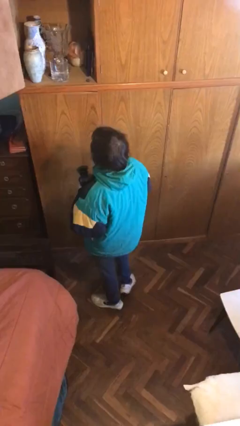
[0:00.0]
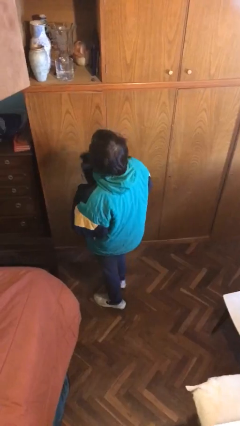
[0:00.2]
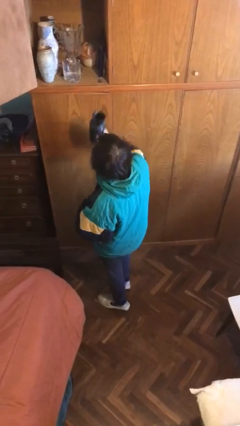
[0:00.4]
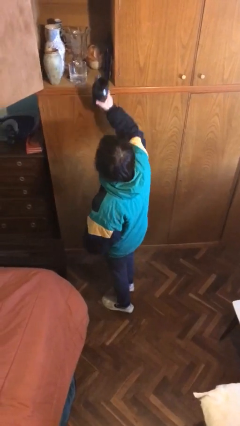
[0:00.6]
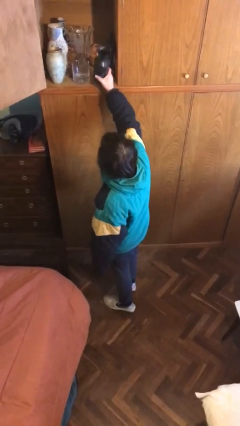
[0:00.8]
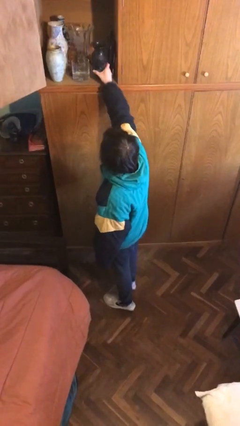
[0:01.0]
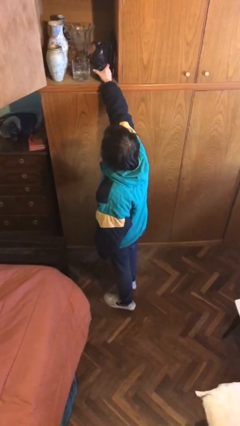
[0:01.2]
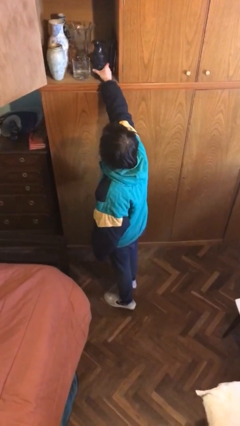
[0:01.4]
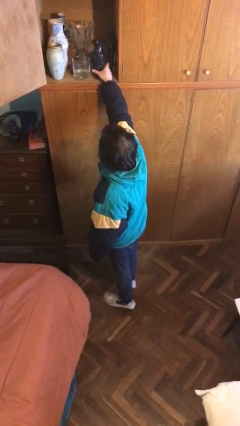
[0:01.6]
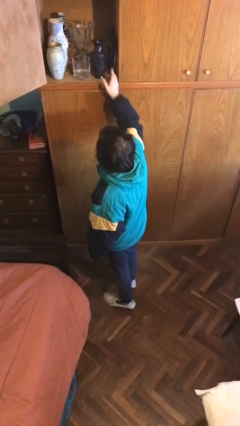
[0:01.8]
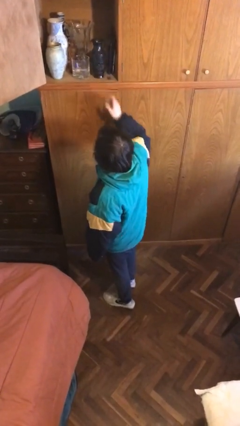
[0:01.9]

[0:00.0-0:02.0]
person puts down object into cabinet

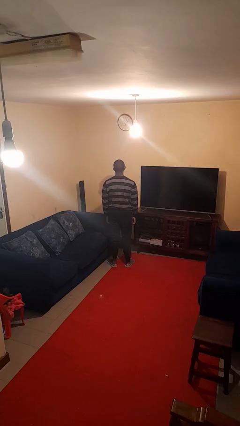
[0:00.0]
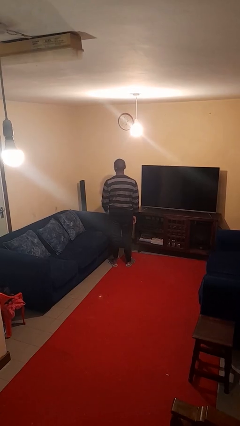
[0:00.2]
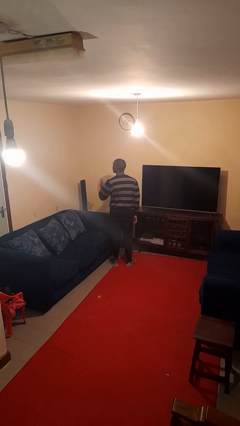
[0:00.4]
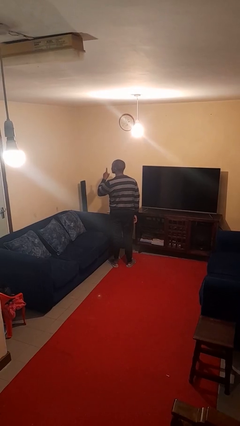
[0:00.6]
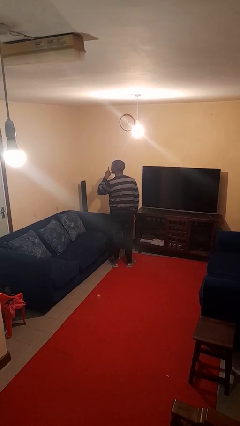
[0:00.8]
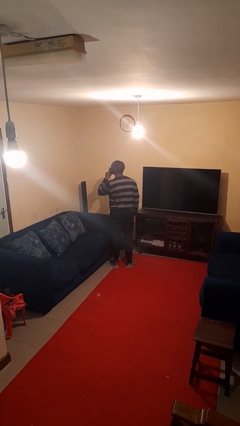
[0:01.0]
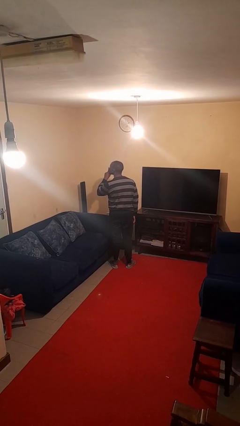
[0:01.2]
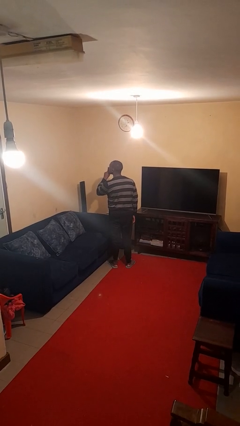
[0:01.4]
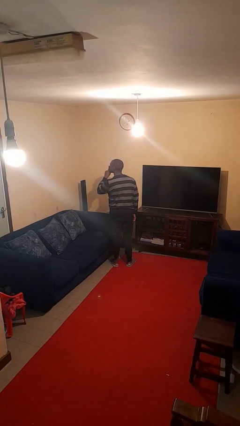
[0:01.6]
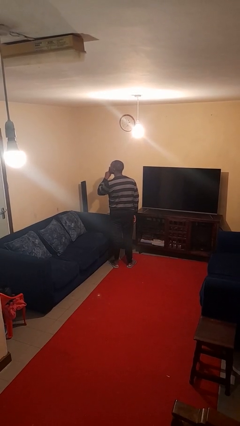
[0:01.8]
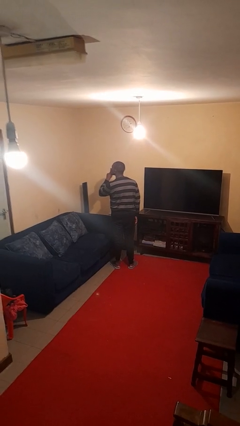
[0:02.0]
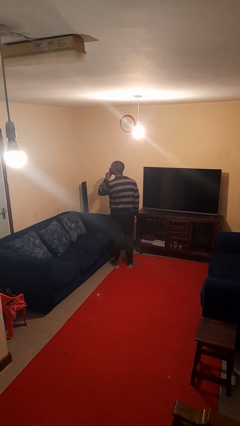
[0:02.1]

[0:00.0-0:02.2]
person gestures be quiet

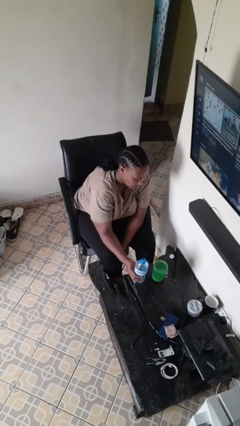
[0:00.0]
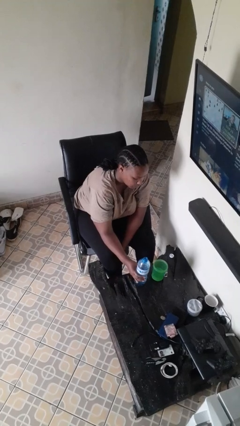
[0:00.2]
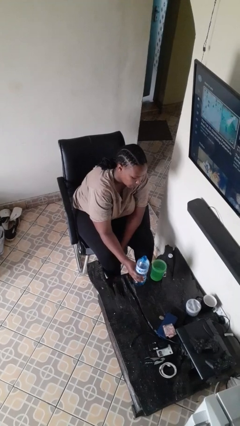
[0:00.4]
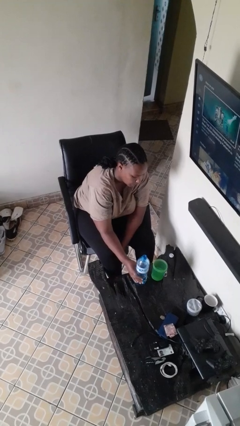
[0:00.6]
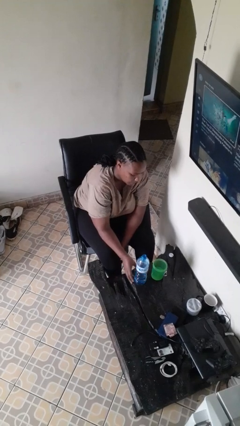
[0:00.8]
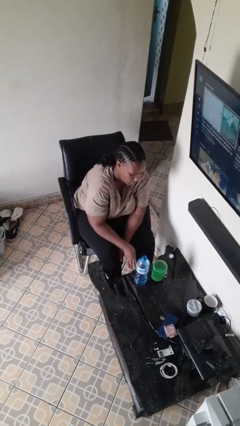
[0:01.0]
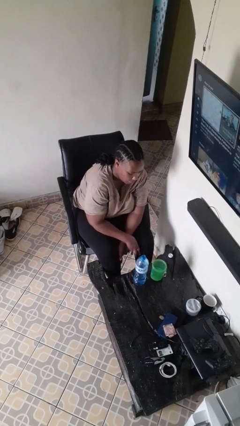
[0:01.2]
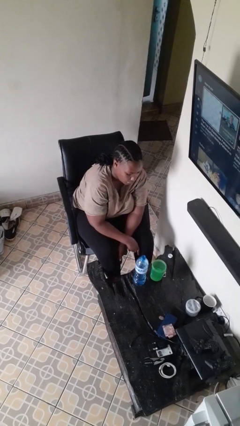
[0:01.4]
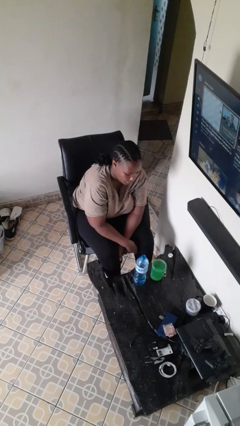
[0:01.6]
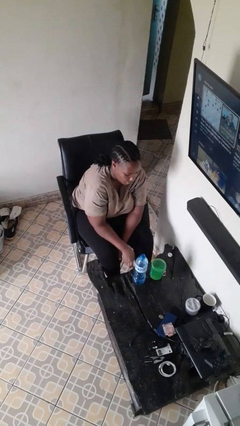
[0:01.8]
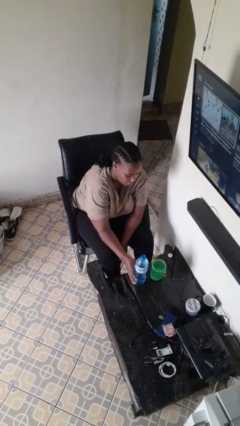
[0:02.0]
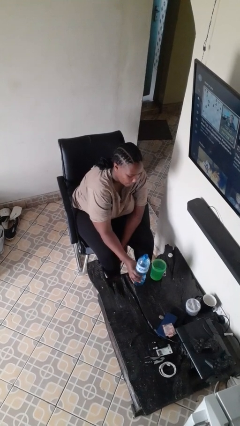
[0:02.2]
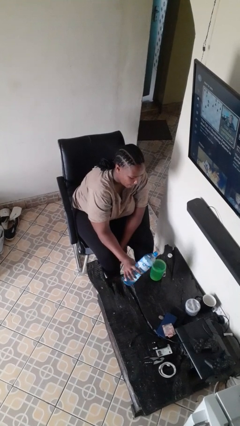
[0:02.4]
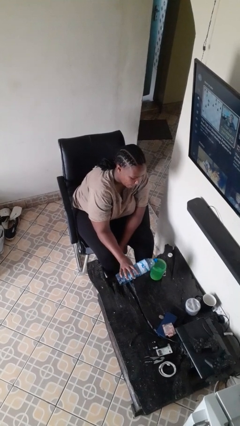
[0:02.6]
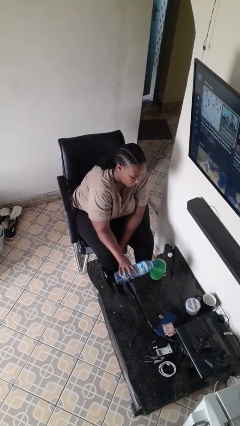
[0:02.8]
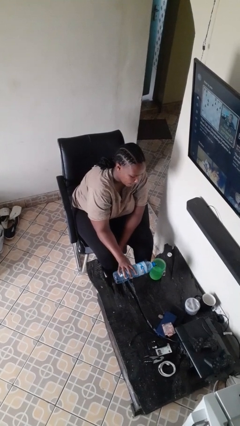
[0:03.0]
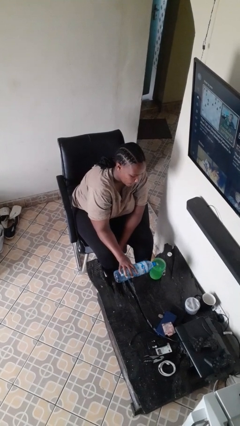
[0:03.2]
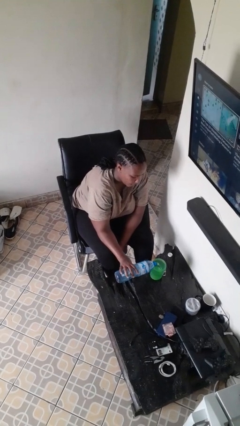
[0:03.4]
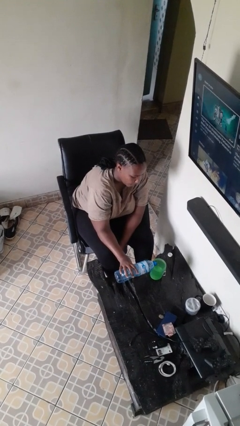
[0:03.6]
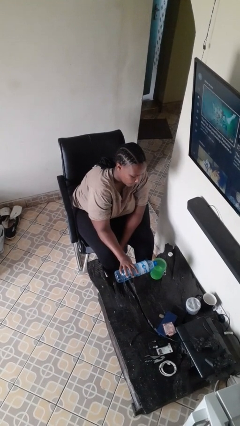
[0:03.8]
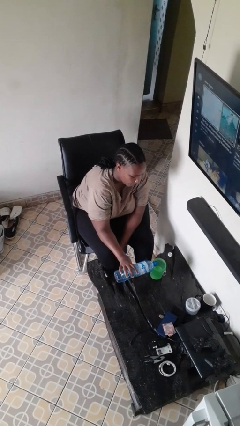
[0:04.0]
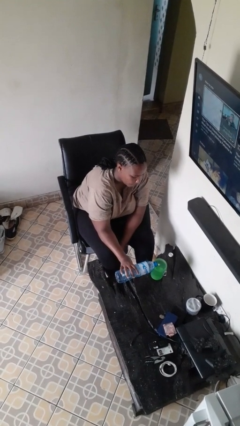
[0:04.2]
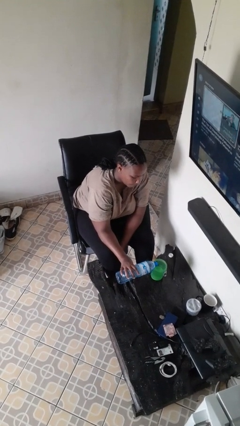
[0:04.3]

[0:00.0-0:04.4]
person pours liquid into cup

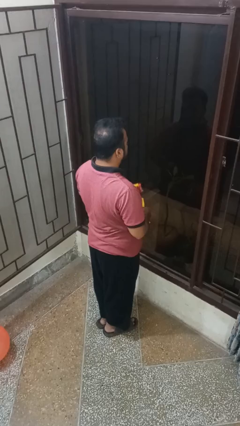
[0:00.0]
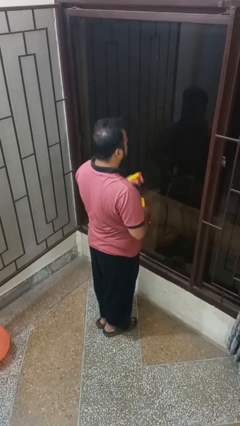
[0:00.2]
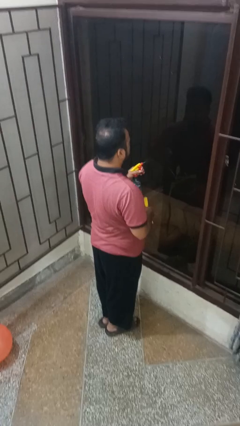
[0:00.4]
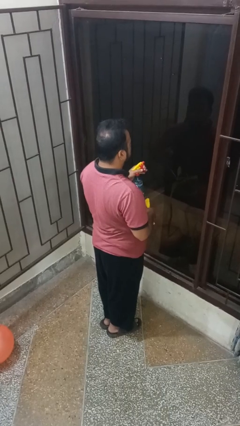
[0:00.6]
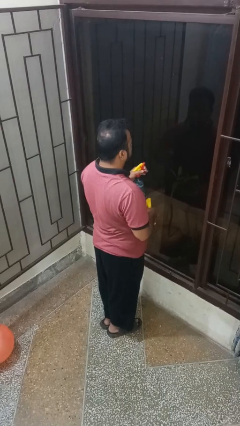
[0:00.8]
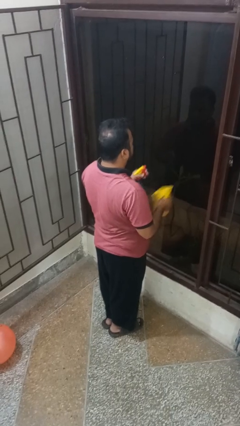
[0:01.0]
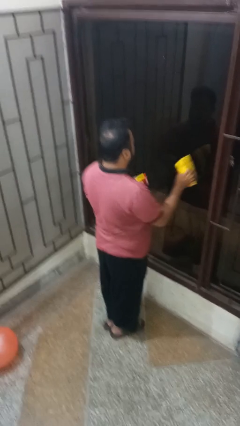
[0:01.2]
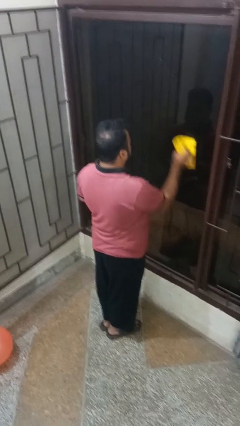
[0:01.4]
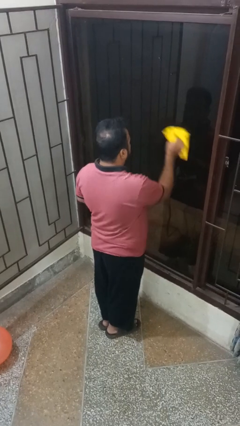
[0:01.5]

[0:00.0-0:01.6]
person sprays from bottle

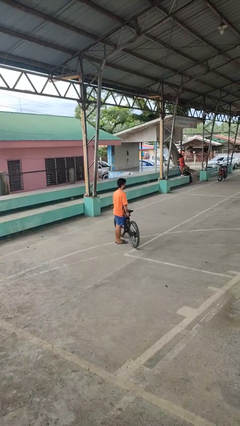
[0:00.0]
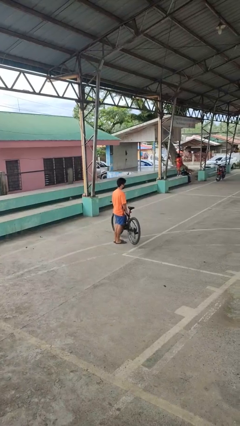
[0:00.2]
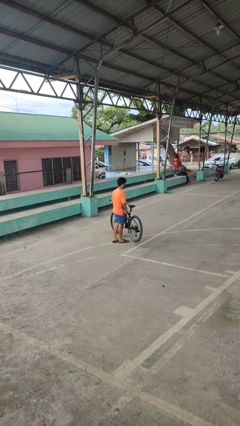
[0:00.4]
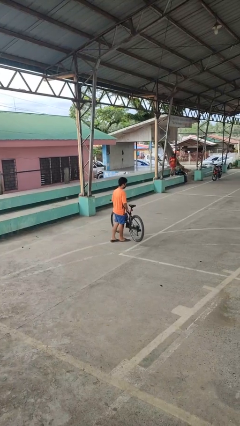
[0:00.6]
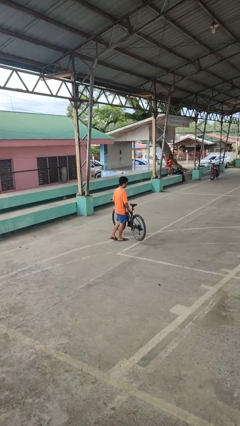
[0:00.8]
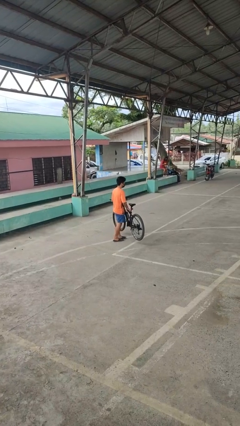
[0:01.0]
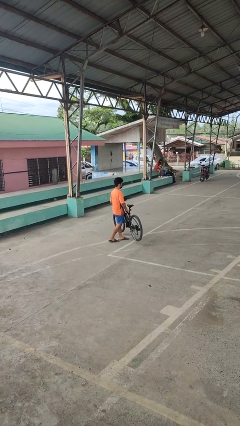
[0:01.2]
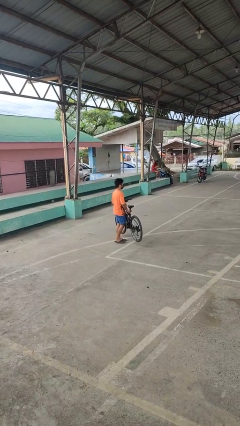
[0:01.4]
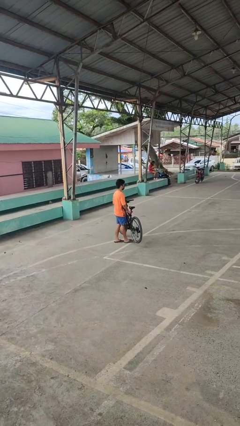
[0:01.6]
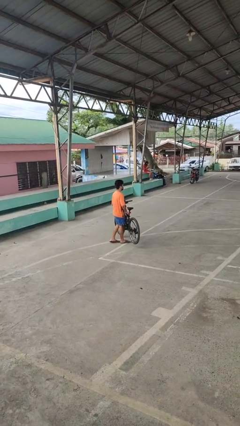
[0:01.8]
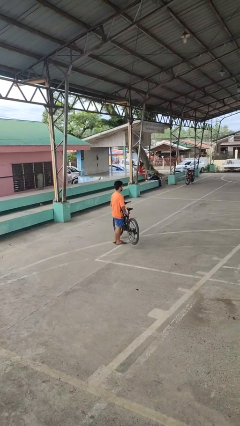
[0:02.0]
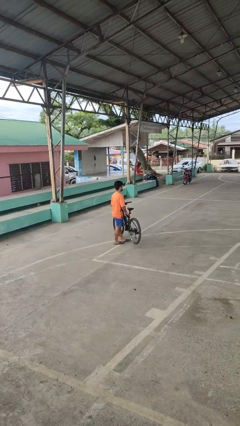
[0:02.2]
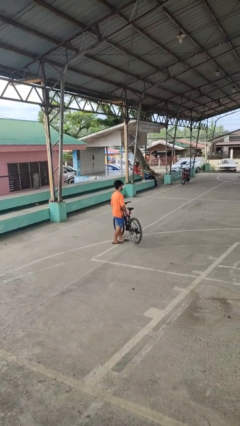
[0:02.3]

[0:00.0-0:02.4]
person carries bicycle

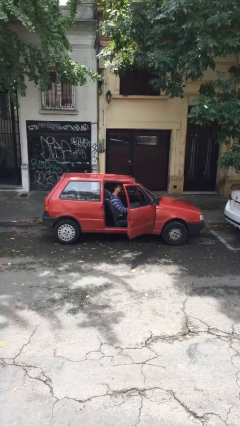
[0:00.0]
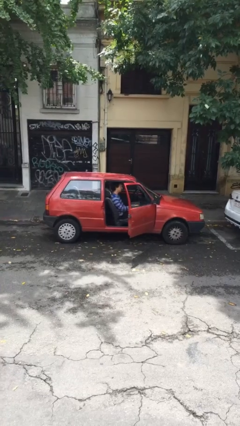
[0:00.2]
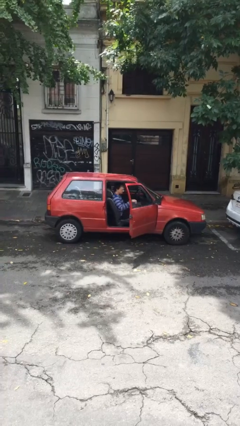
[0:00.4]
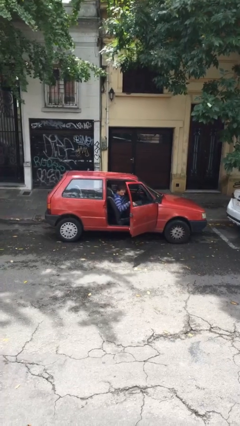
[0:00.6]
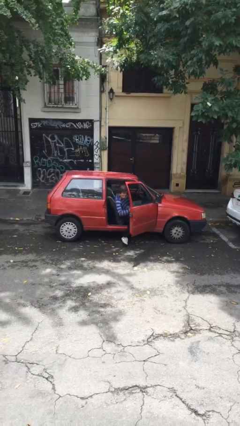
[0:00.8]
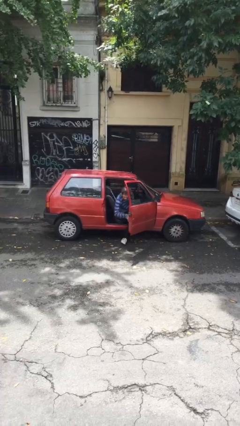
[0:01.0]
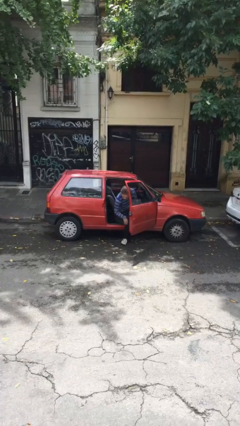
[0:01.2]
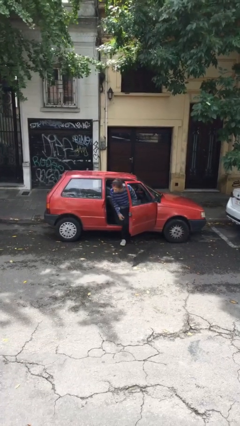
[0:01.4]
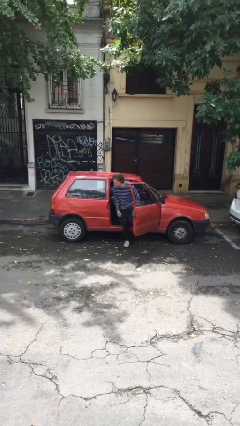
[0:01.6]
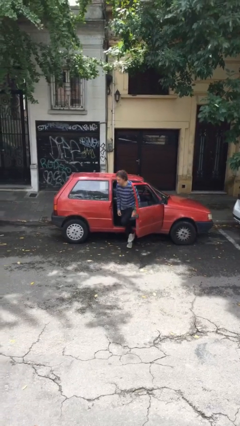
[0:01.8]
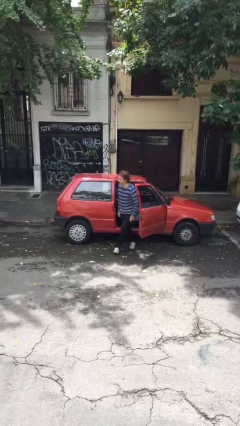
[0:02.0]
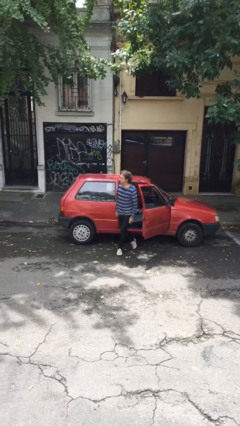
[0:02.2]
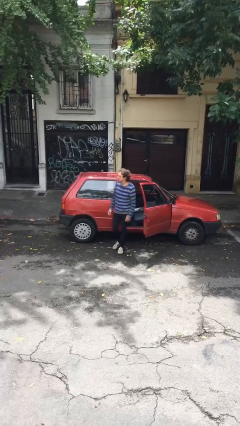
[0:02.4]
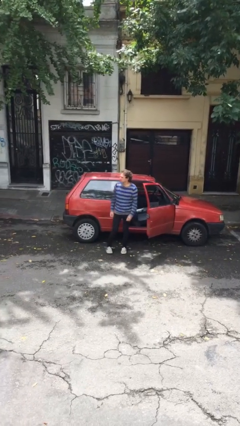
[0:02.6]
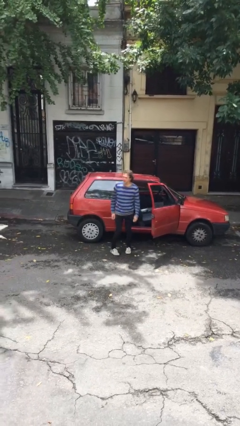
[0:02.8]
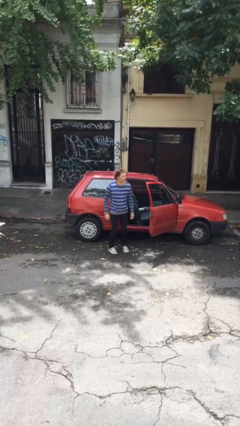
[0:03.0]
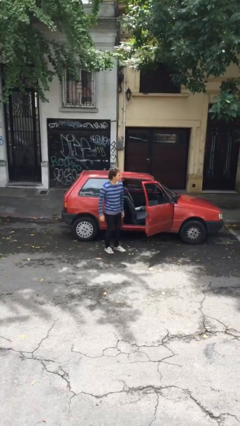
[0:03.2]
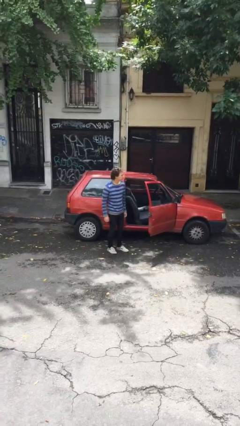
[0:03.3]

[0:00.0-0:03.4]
person exits car

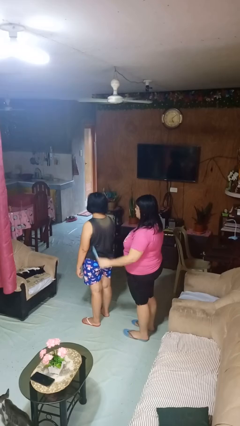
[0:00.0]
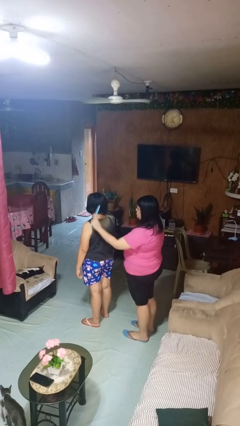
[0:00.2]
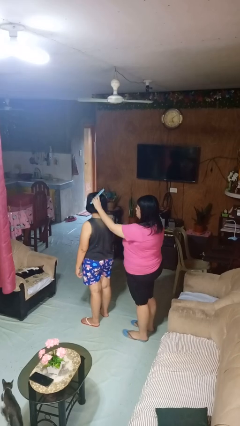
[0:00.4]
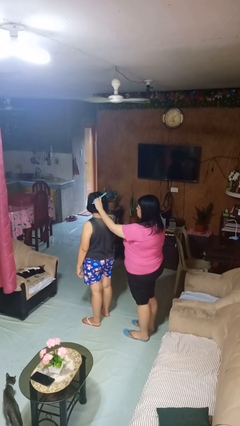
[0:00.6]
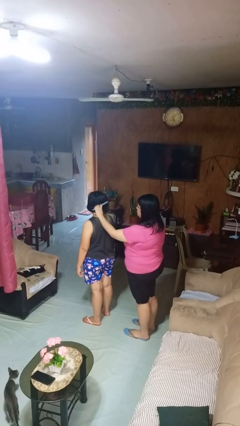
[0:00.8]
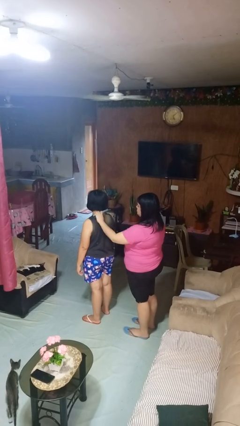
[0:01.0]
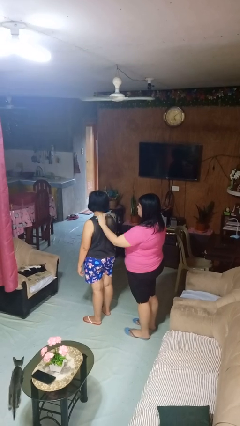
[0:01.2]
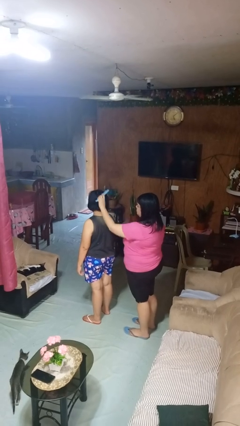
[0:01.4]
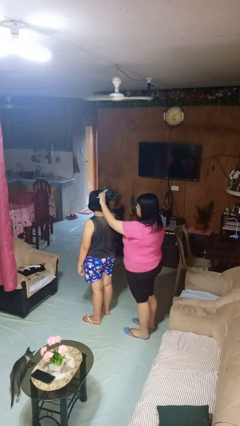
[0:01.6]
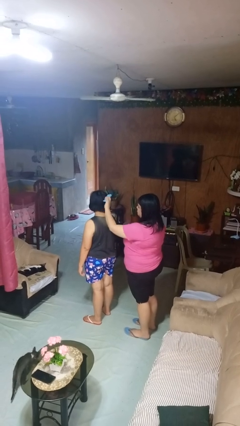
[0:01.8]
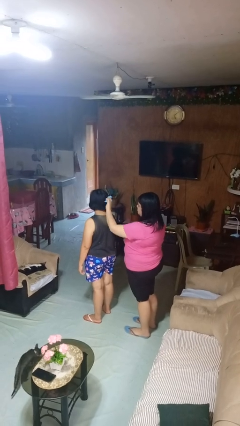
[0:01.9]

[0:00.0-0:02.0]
person brushes hair of person
